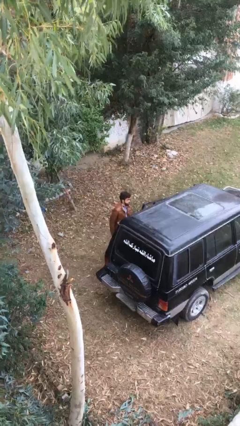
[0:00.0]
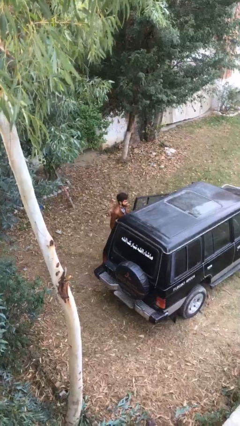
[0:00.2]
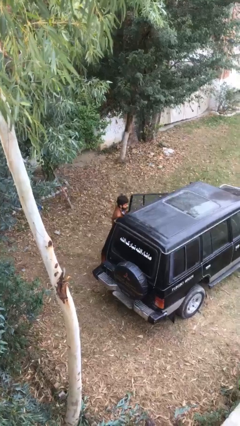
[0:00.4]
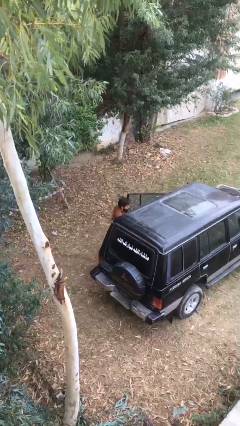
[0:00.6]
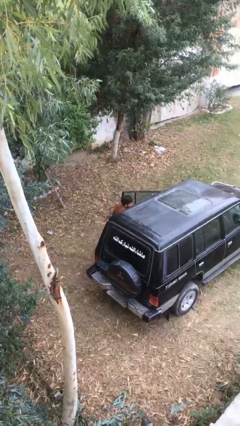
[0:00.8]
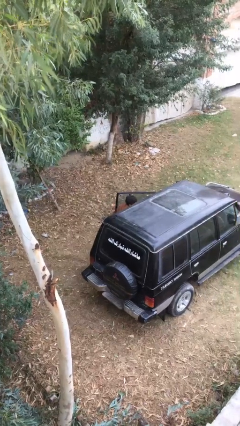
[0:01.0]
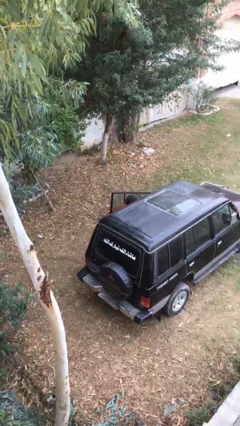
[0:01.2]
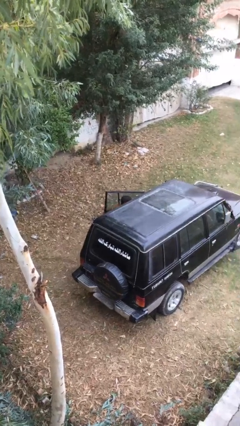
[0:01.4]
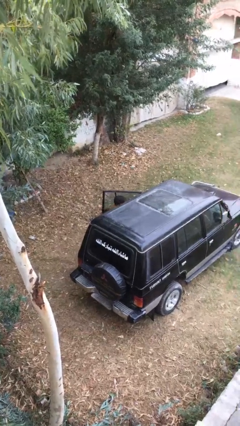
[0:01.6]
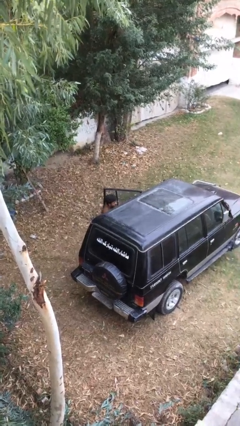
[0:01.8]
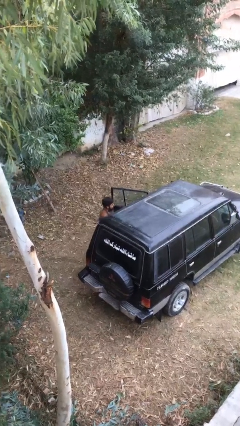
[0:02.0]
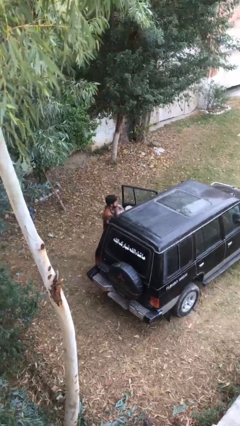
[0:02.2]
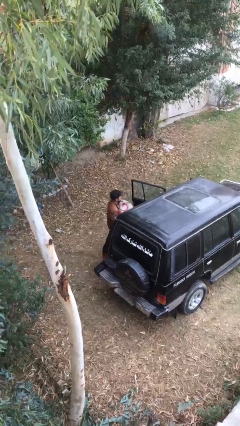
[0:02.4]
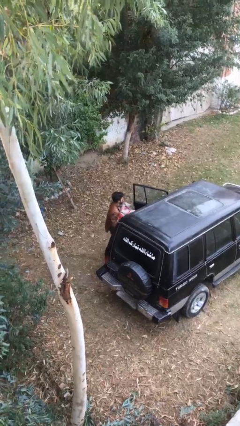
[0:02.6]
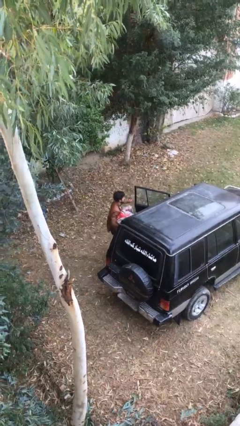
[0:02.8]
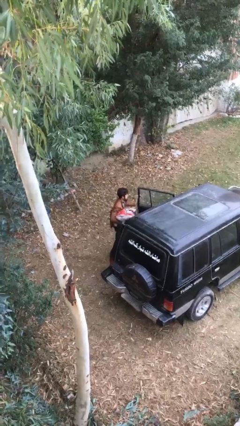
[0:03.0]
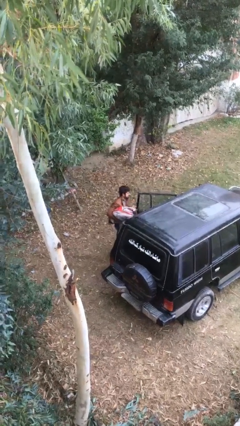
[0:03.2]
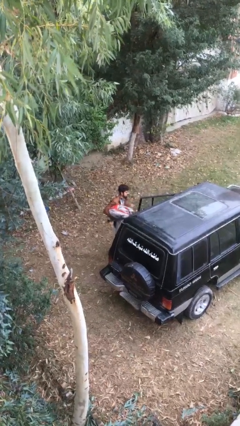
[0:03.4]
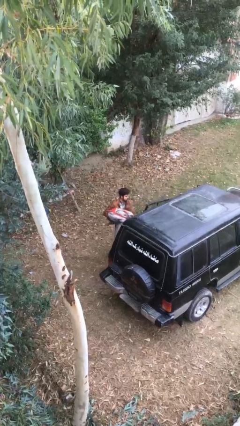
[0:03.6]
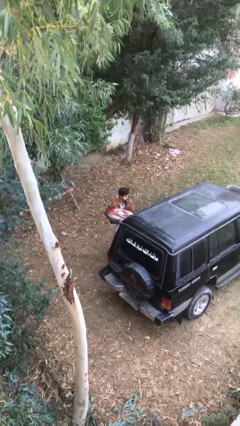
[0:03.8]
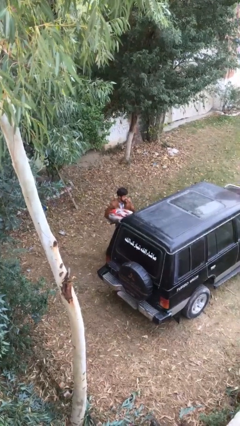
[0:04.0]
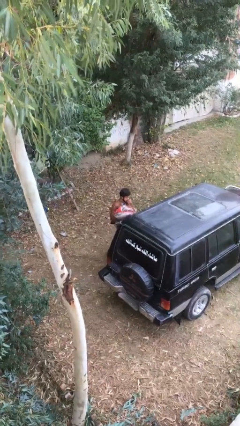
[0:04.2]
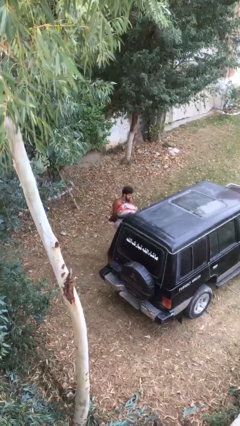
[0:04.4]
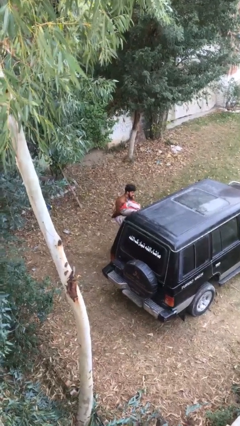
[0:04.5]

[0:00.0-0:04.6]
person unloads car

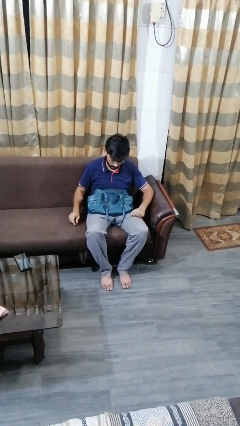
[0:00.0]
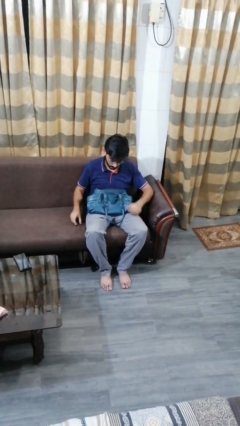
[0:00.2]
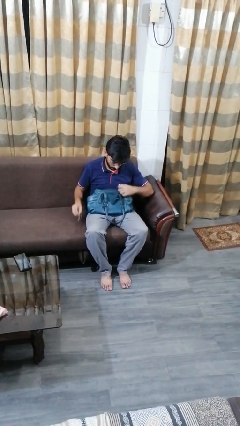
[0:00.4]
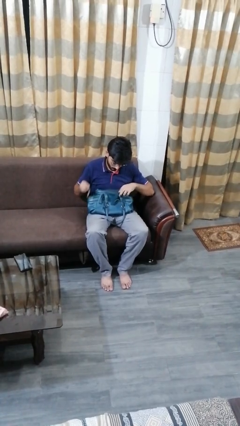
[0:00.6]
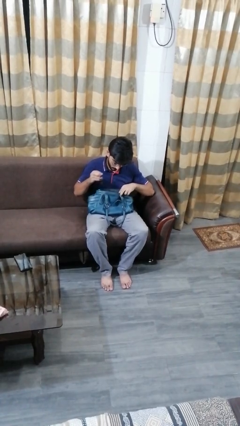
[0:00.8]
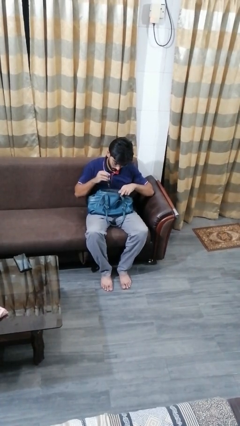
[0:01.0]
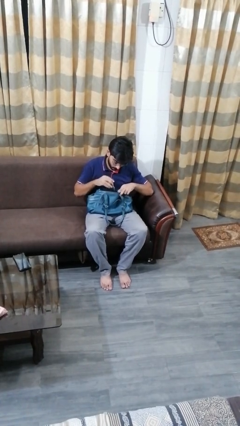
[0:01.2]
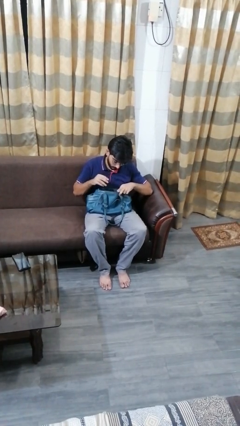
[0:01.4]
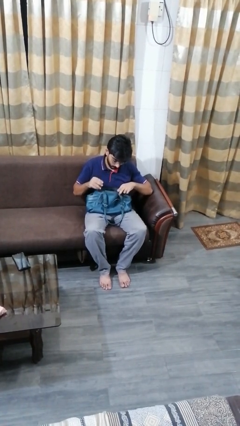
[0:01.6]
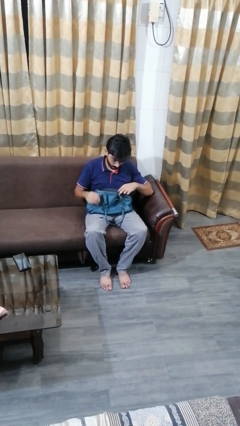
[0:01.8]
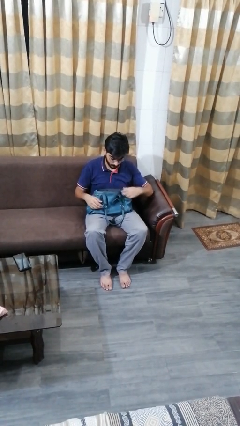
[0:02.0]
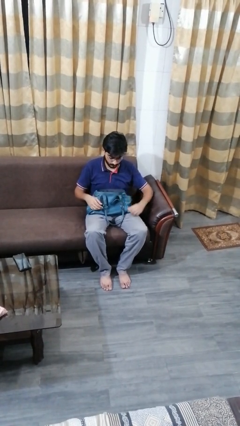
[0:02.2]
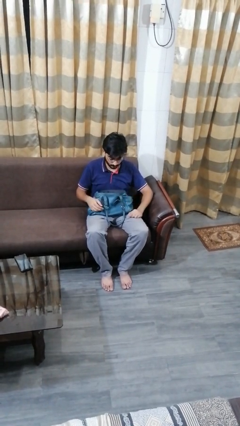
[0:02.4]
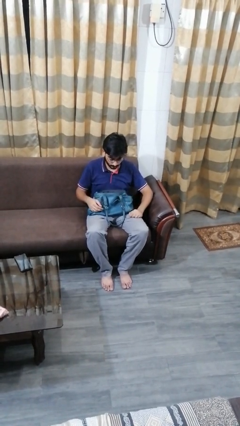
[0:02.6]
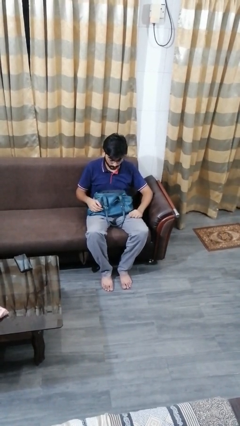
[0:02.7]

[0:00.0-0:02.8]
person puts object into purse

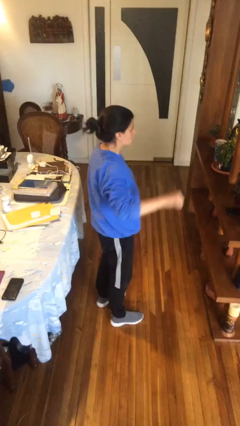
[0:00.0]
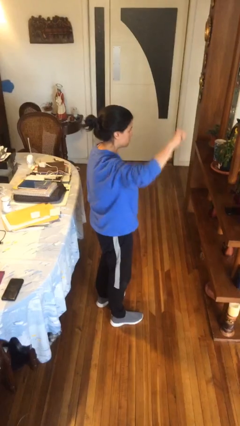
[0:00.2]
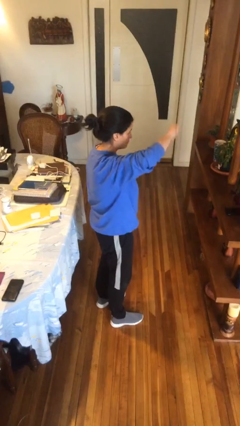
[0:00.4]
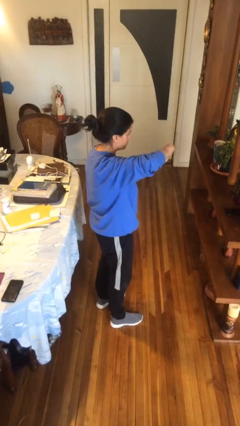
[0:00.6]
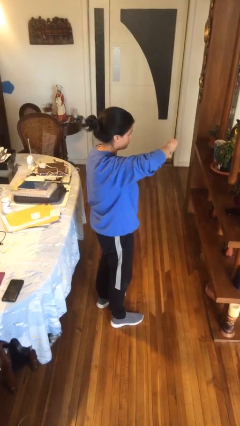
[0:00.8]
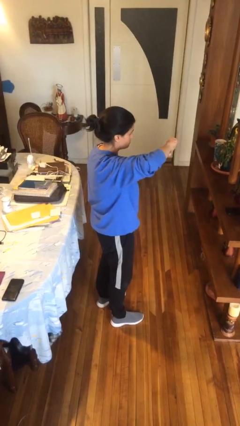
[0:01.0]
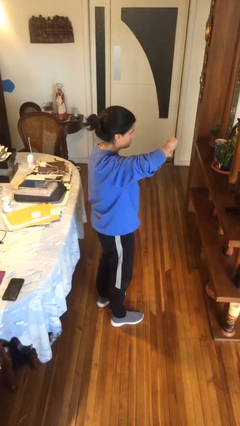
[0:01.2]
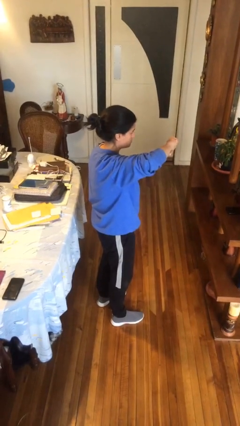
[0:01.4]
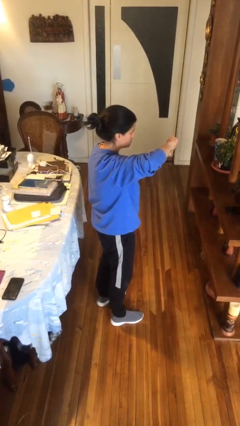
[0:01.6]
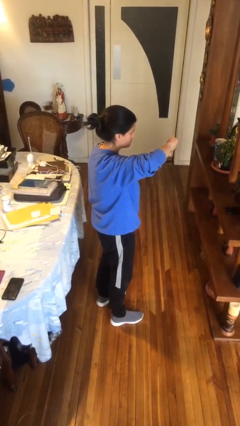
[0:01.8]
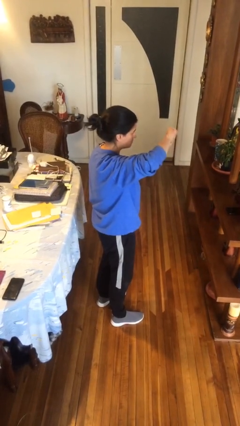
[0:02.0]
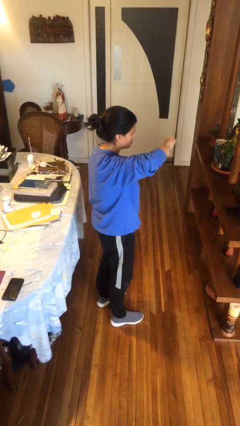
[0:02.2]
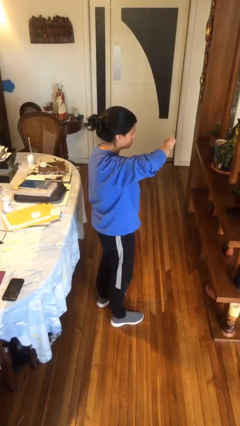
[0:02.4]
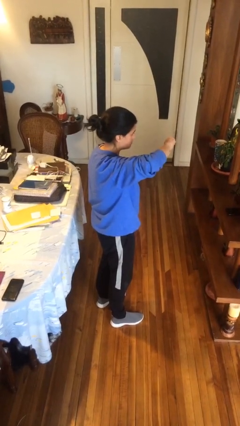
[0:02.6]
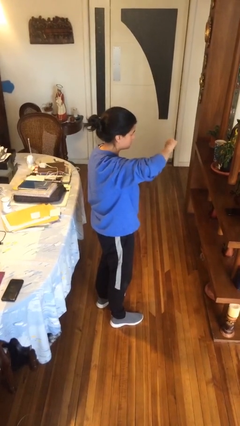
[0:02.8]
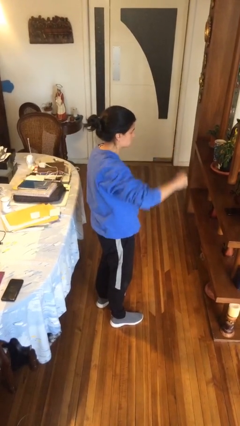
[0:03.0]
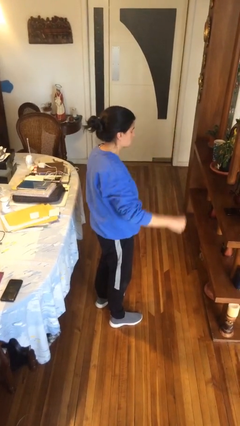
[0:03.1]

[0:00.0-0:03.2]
person gestures thumbs down

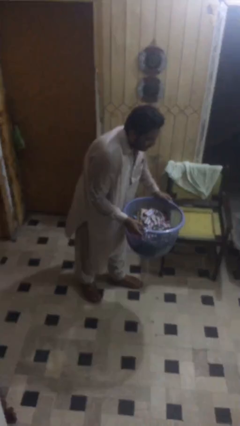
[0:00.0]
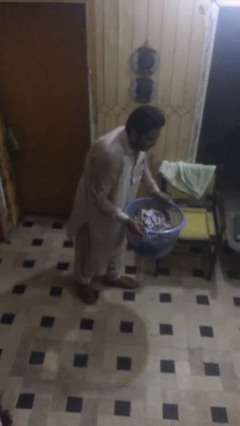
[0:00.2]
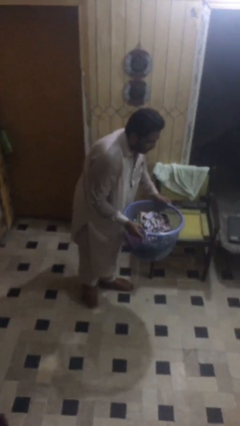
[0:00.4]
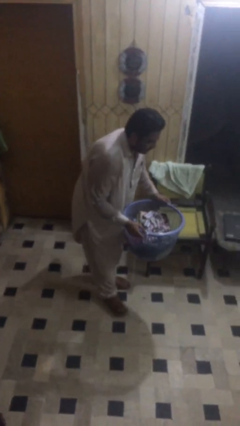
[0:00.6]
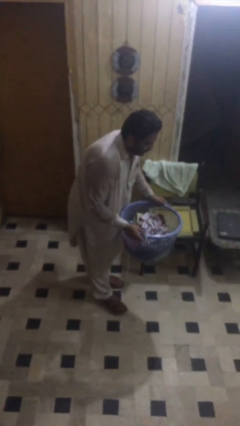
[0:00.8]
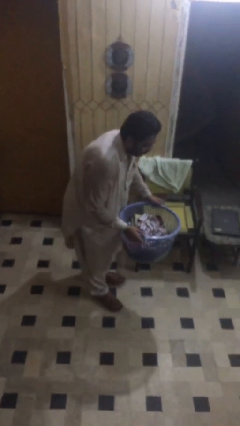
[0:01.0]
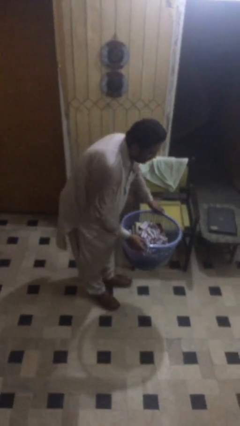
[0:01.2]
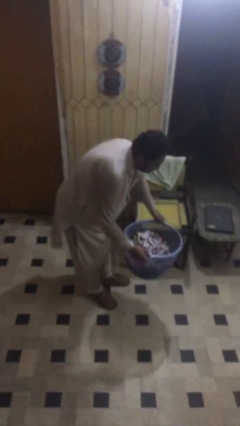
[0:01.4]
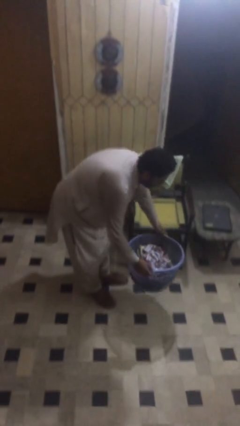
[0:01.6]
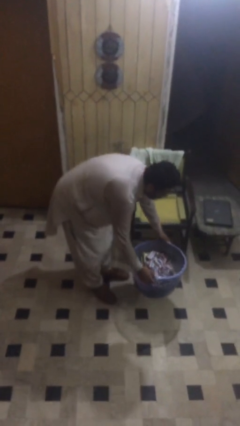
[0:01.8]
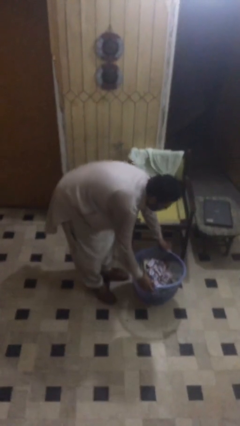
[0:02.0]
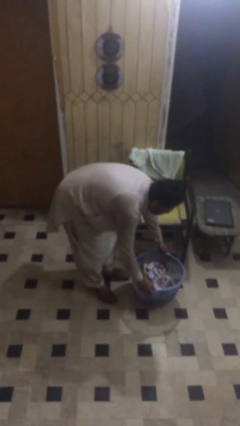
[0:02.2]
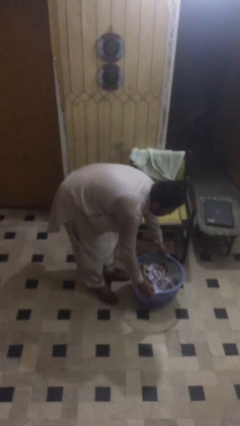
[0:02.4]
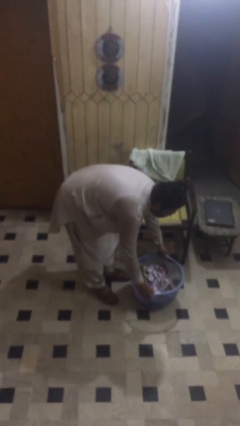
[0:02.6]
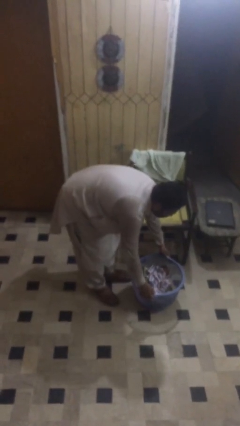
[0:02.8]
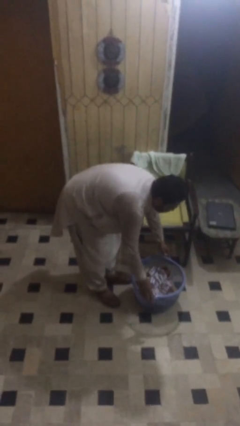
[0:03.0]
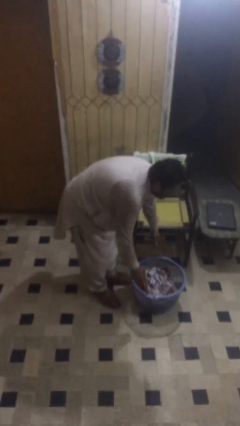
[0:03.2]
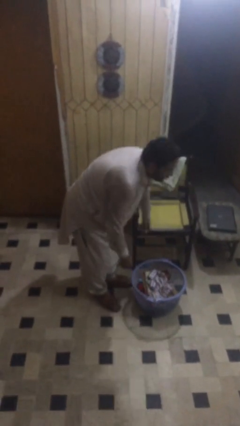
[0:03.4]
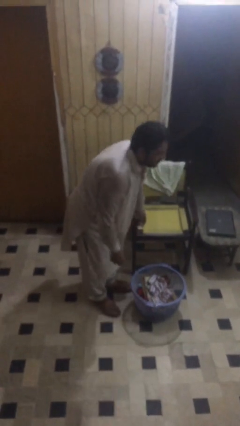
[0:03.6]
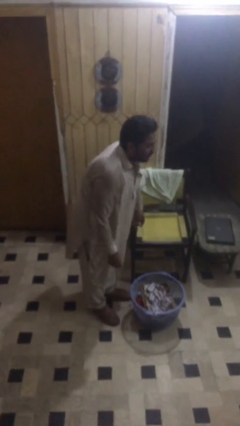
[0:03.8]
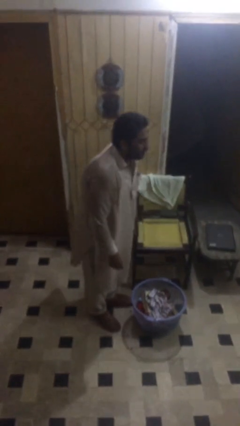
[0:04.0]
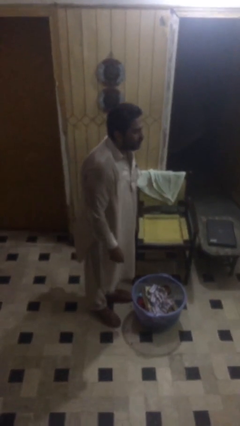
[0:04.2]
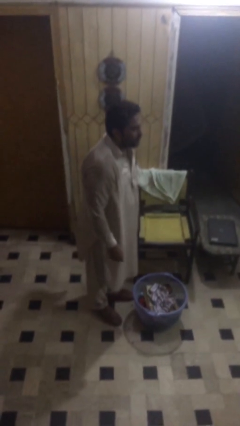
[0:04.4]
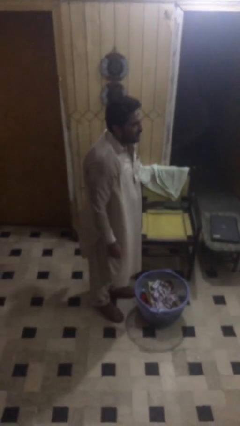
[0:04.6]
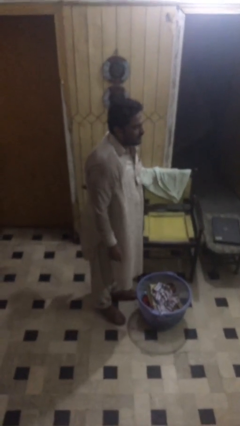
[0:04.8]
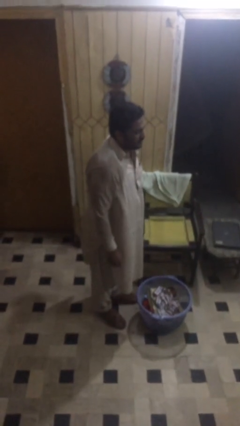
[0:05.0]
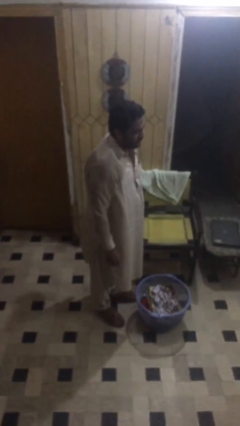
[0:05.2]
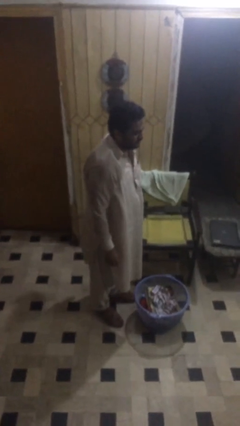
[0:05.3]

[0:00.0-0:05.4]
person puts down object on floor

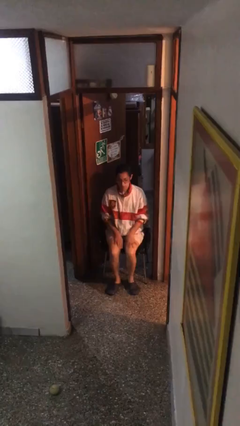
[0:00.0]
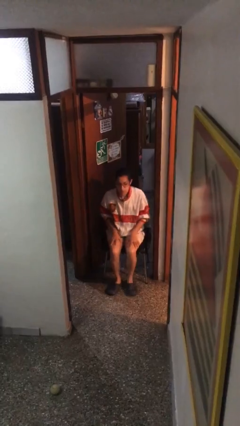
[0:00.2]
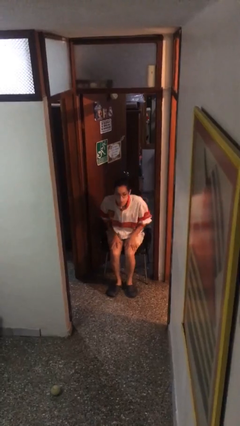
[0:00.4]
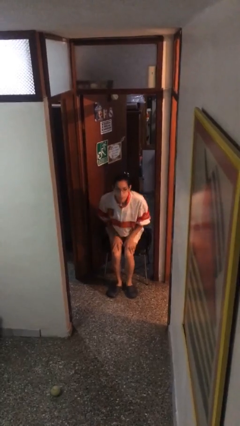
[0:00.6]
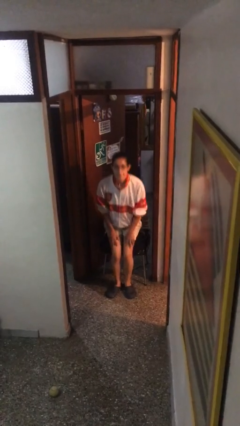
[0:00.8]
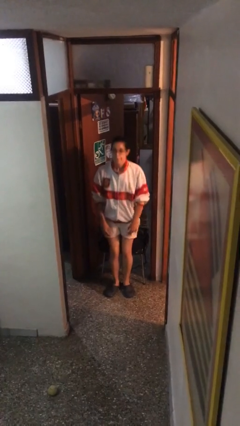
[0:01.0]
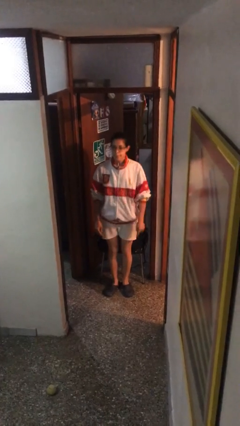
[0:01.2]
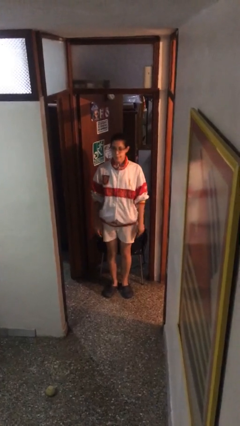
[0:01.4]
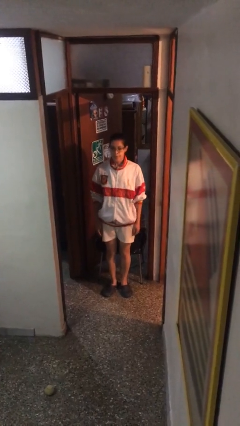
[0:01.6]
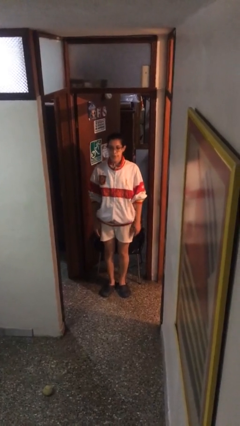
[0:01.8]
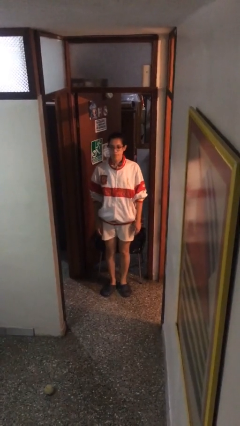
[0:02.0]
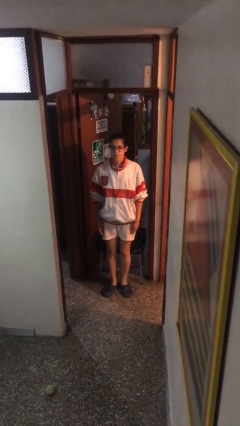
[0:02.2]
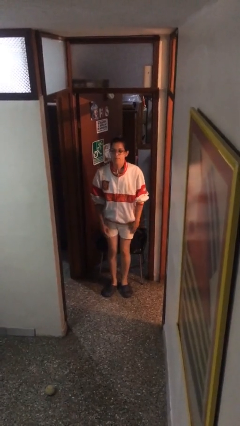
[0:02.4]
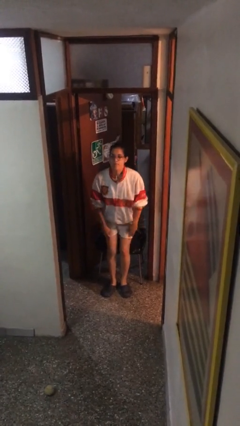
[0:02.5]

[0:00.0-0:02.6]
person stands up
